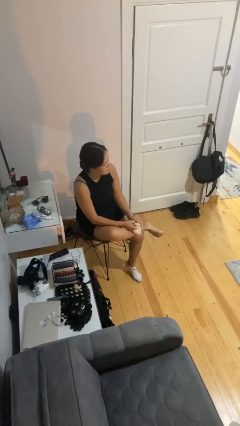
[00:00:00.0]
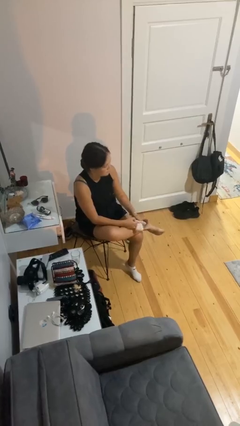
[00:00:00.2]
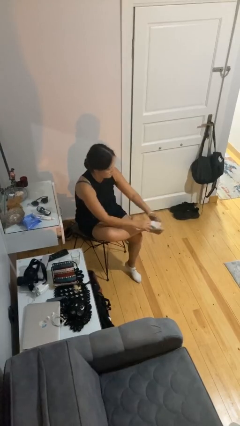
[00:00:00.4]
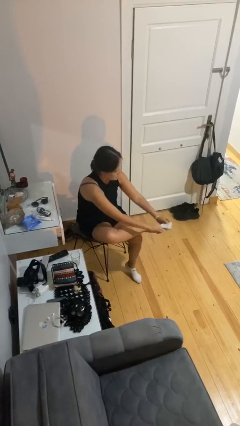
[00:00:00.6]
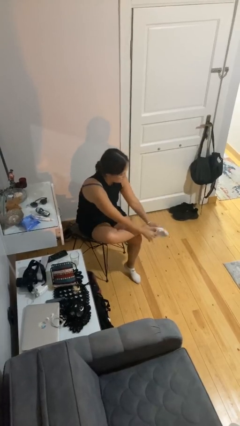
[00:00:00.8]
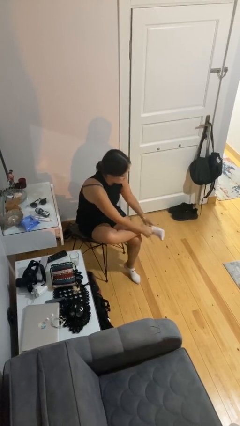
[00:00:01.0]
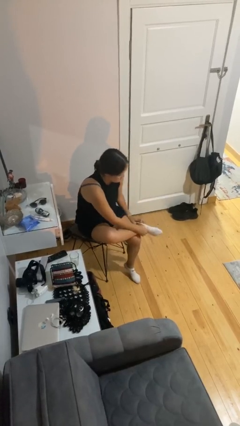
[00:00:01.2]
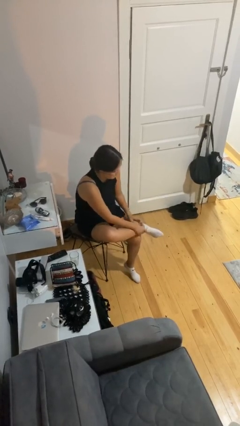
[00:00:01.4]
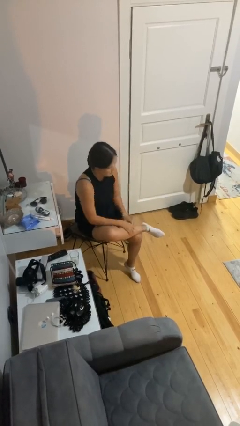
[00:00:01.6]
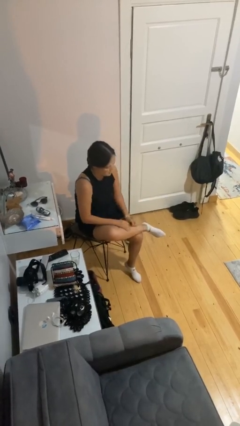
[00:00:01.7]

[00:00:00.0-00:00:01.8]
person puts on socks

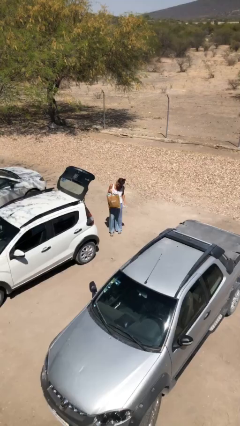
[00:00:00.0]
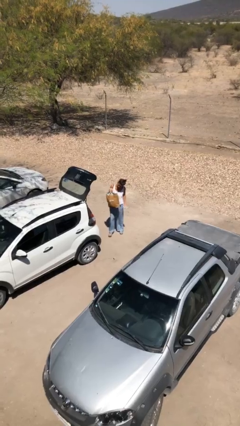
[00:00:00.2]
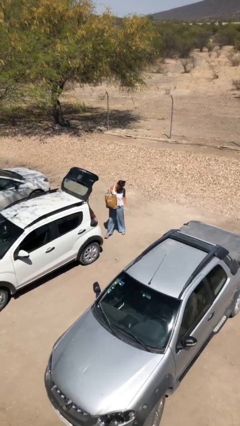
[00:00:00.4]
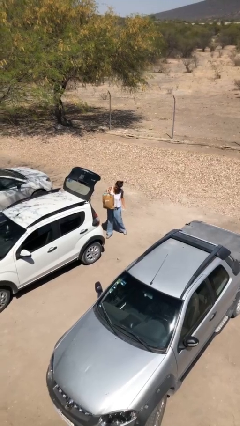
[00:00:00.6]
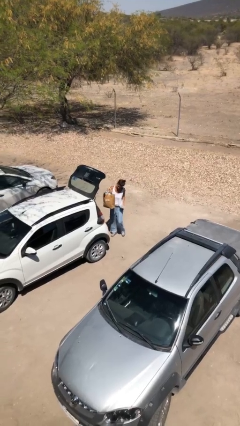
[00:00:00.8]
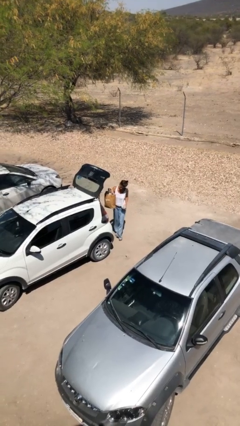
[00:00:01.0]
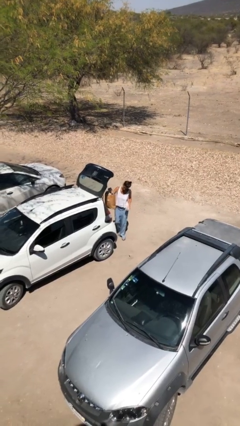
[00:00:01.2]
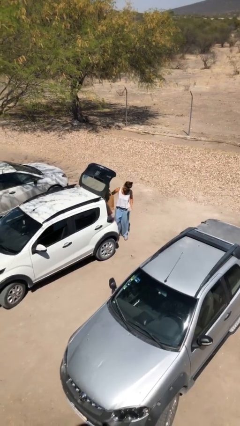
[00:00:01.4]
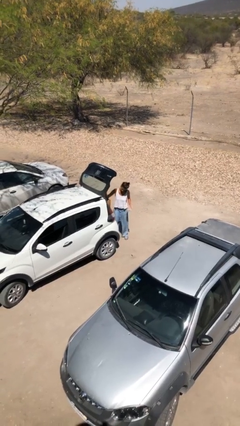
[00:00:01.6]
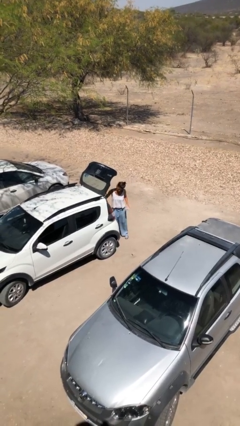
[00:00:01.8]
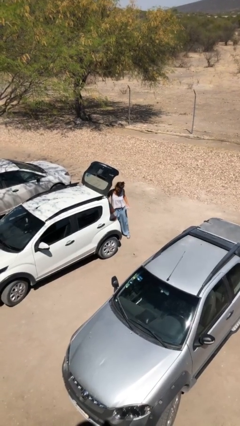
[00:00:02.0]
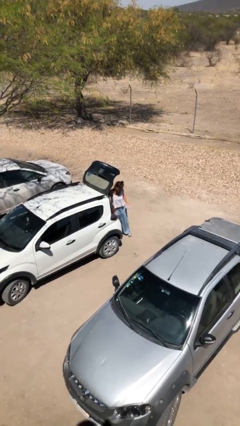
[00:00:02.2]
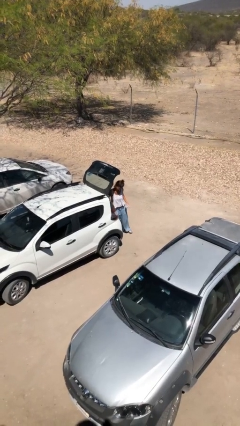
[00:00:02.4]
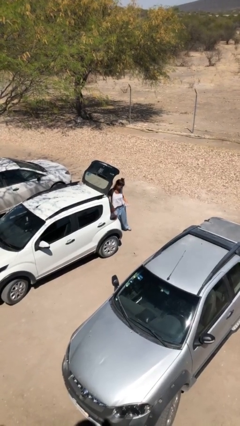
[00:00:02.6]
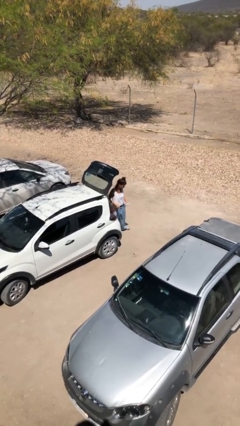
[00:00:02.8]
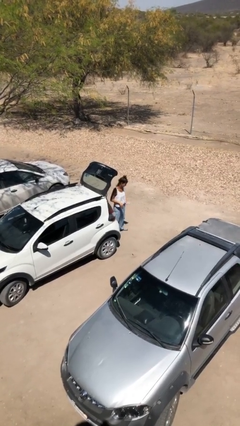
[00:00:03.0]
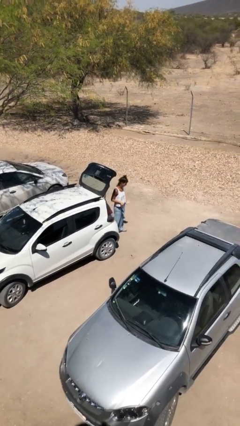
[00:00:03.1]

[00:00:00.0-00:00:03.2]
person loads car

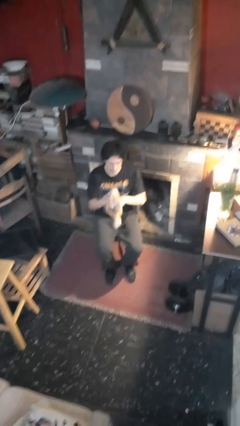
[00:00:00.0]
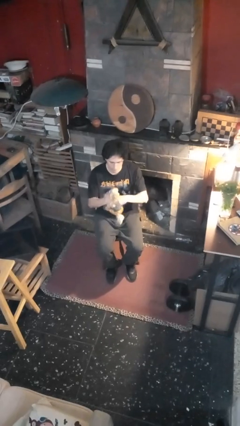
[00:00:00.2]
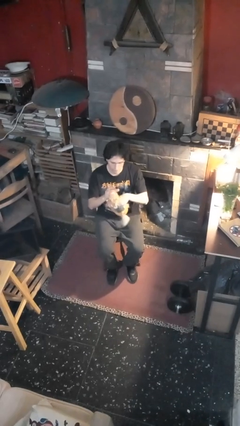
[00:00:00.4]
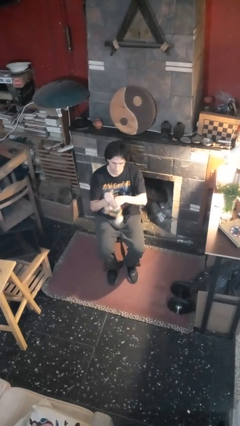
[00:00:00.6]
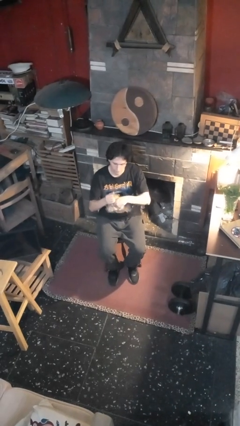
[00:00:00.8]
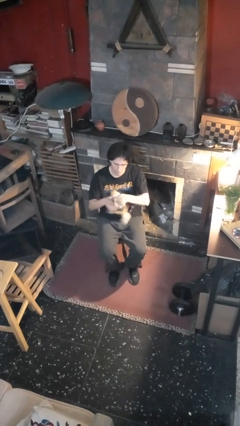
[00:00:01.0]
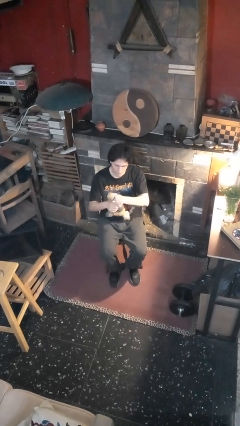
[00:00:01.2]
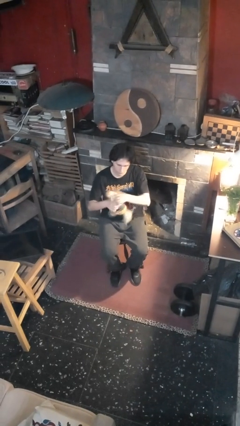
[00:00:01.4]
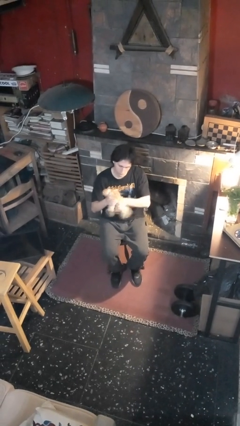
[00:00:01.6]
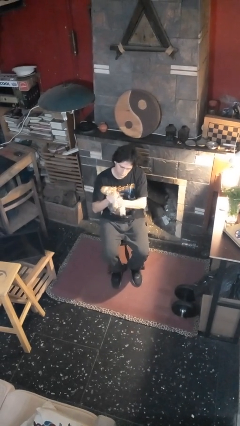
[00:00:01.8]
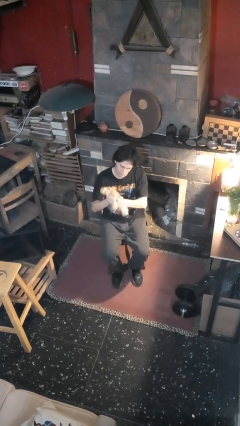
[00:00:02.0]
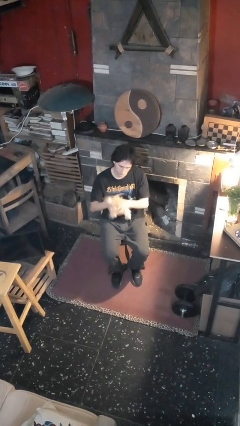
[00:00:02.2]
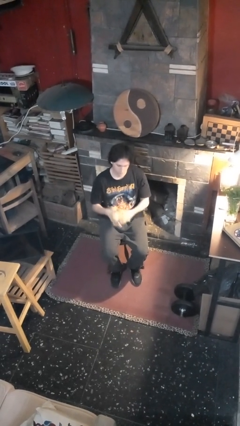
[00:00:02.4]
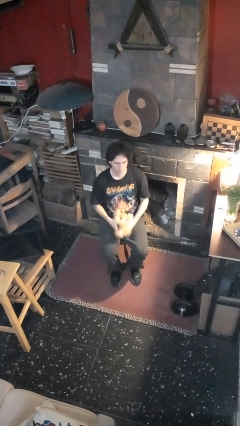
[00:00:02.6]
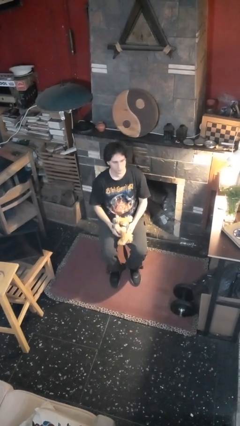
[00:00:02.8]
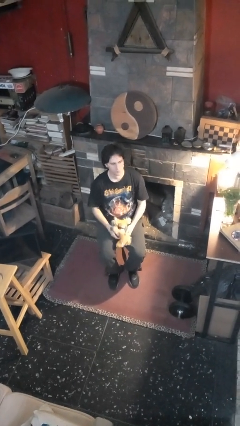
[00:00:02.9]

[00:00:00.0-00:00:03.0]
person squeezes object

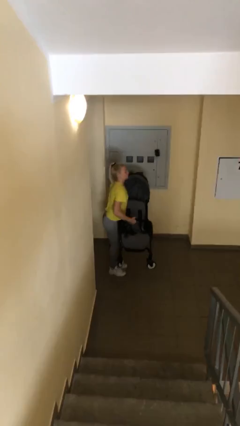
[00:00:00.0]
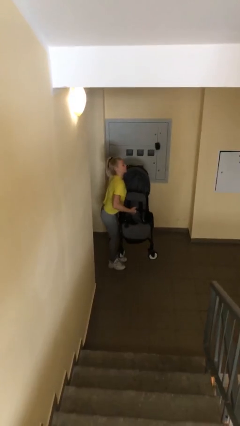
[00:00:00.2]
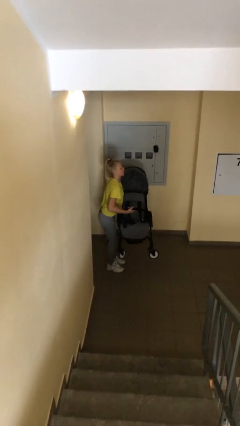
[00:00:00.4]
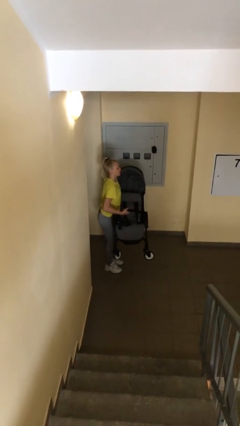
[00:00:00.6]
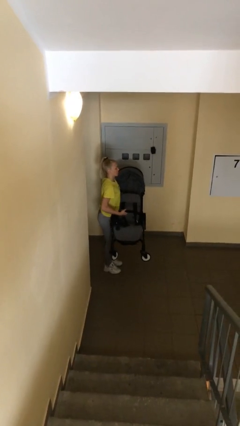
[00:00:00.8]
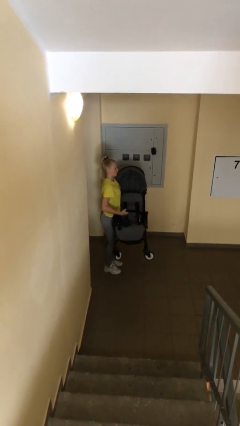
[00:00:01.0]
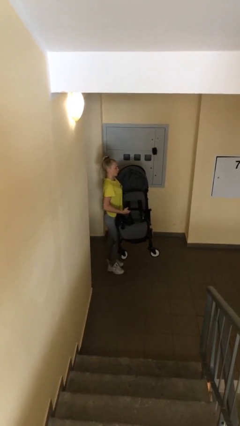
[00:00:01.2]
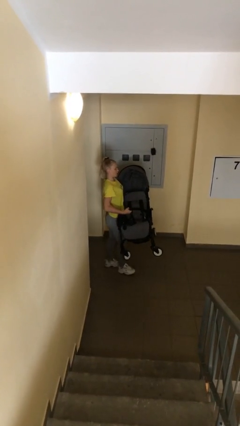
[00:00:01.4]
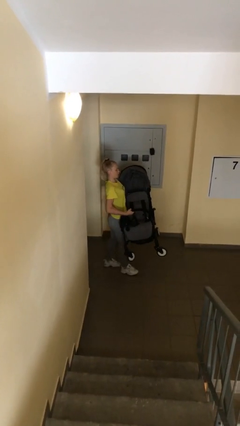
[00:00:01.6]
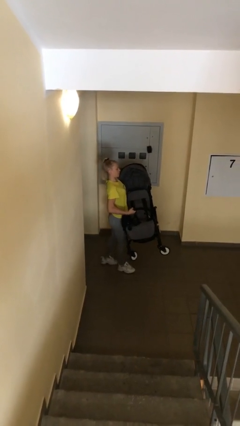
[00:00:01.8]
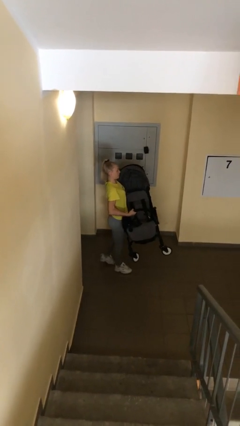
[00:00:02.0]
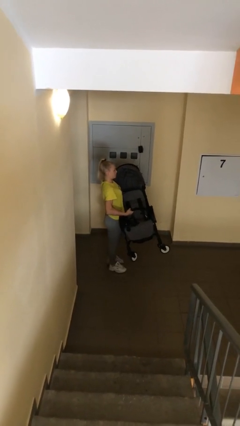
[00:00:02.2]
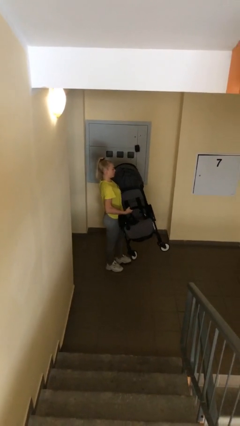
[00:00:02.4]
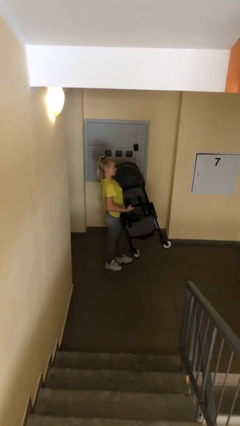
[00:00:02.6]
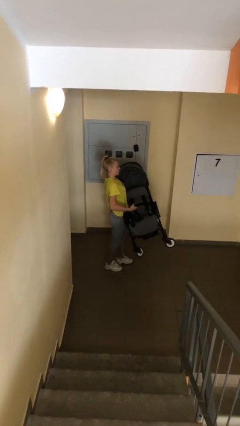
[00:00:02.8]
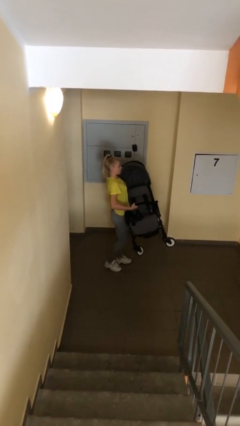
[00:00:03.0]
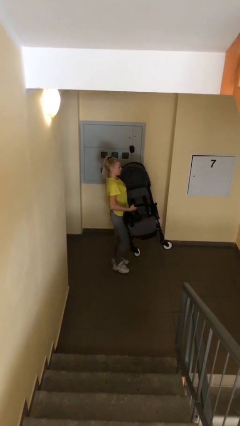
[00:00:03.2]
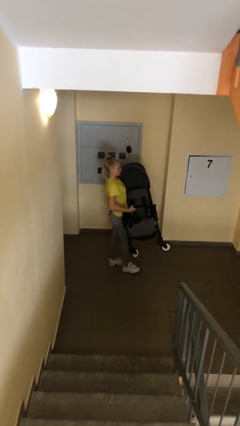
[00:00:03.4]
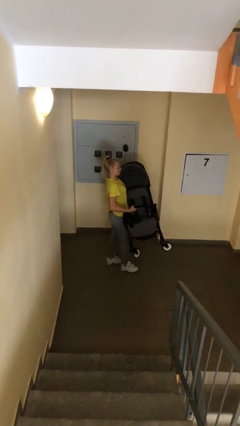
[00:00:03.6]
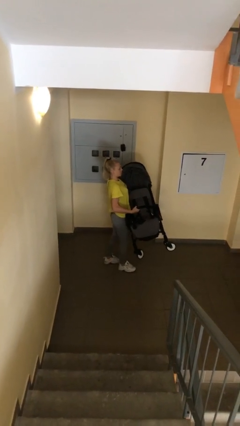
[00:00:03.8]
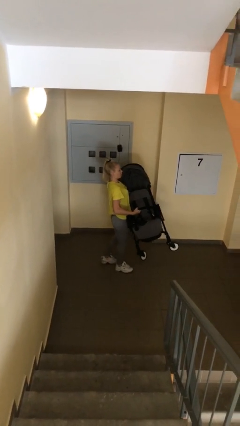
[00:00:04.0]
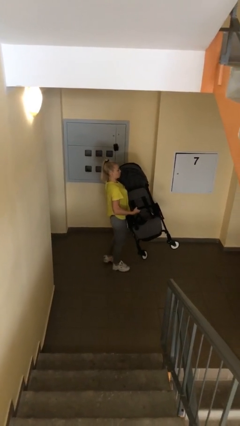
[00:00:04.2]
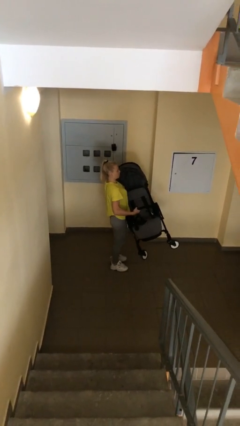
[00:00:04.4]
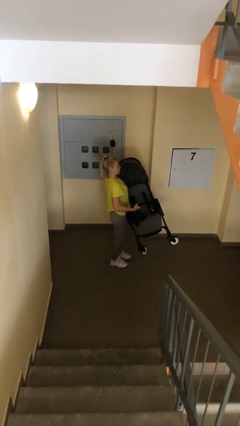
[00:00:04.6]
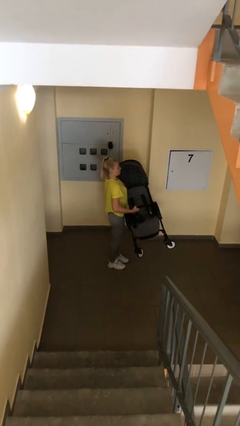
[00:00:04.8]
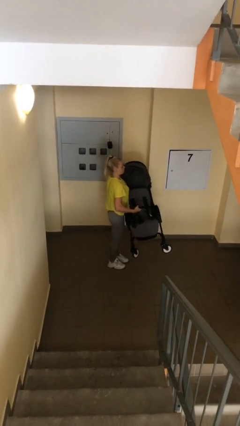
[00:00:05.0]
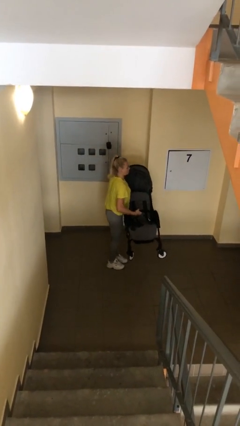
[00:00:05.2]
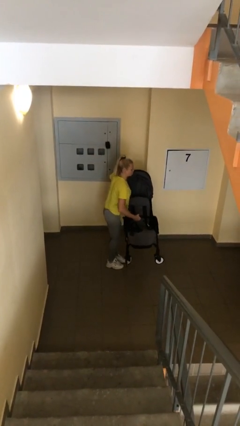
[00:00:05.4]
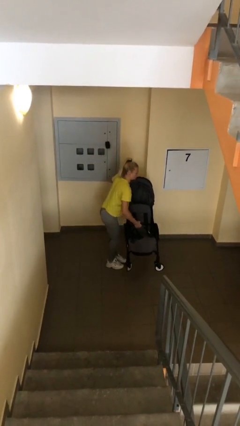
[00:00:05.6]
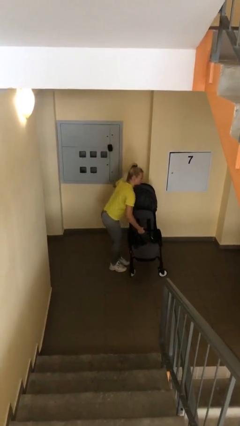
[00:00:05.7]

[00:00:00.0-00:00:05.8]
person carries heavy object

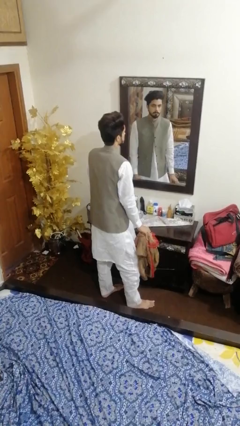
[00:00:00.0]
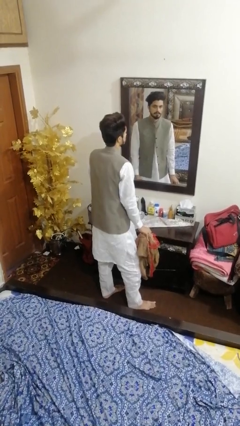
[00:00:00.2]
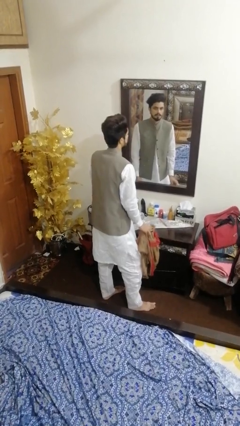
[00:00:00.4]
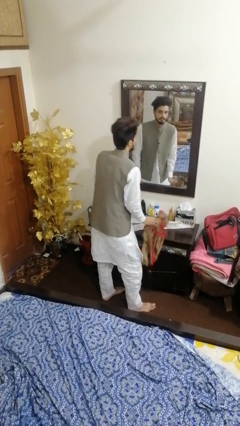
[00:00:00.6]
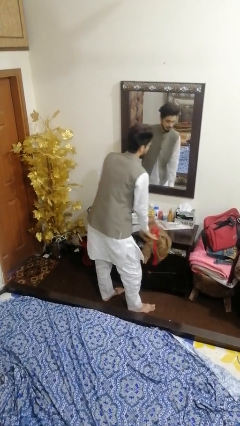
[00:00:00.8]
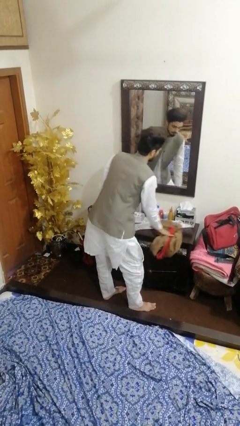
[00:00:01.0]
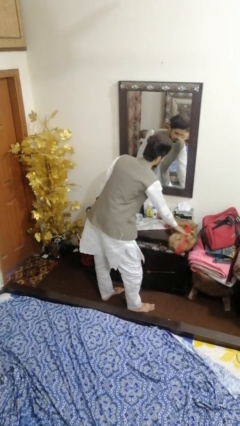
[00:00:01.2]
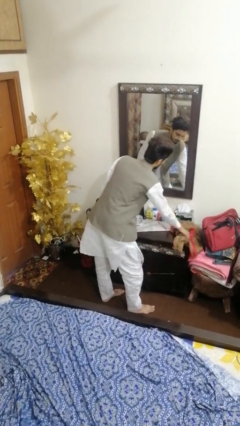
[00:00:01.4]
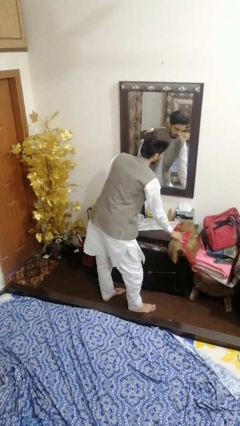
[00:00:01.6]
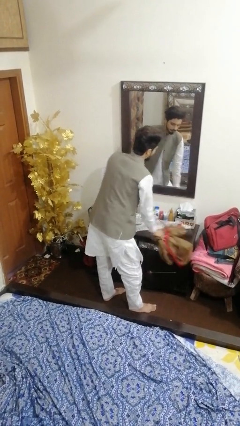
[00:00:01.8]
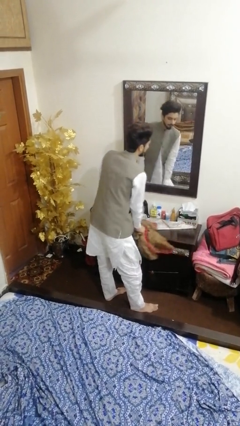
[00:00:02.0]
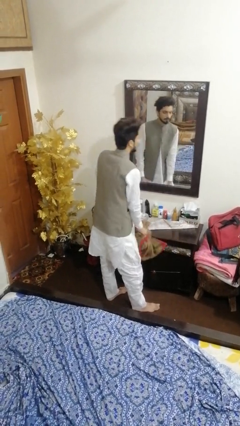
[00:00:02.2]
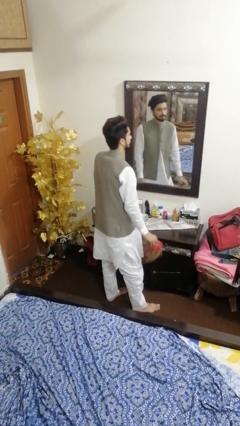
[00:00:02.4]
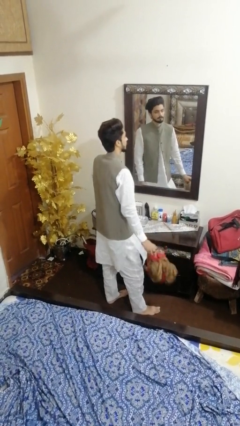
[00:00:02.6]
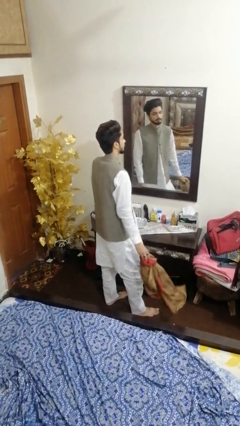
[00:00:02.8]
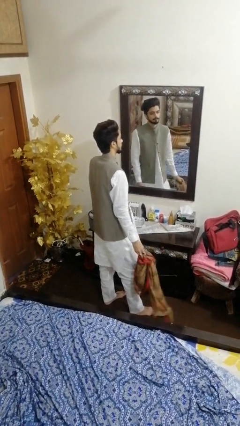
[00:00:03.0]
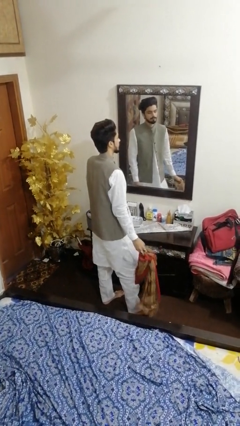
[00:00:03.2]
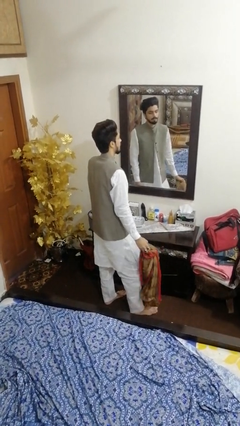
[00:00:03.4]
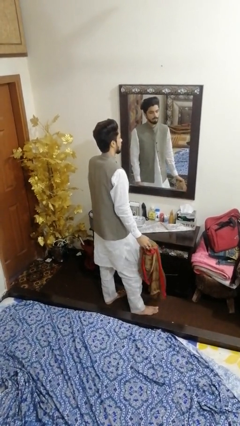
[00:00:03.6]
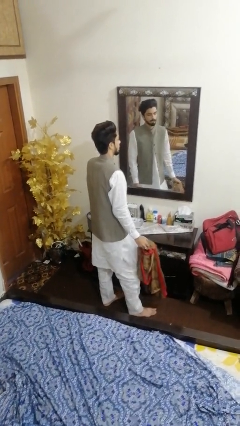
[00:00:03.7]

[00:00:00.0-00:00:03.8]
person cleans table with rag
